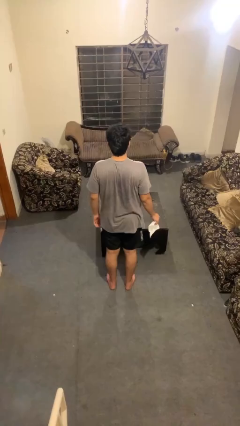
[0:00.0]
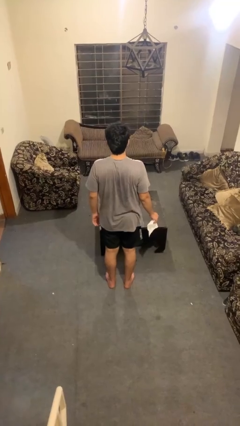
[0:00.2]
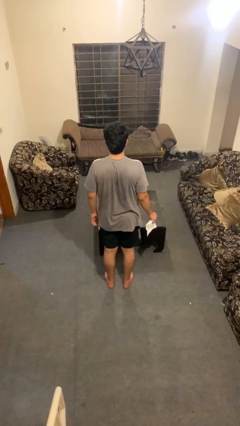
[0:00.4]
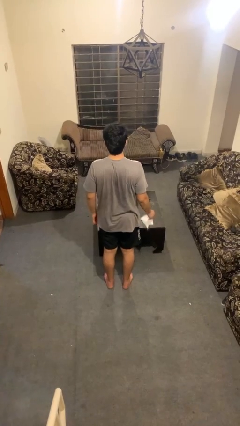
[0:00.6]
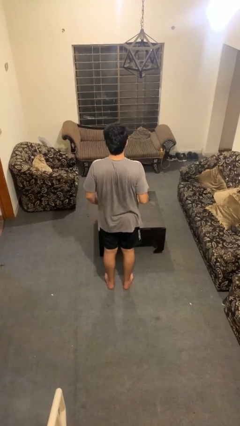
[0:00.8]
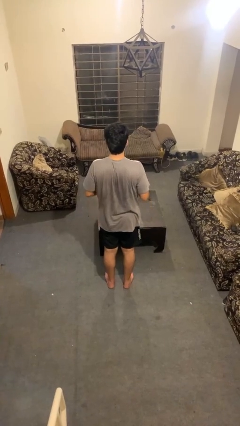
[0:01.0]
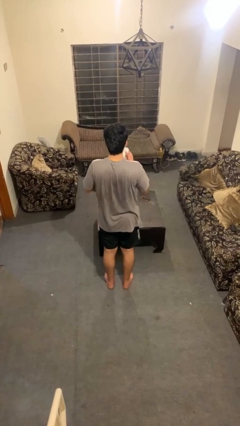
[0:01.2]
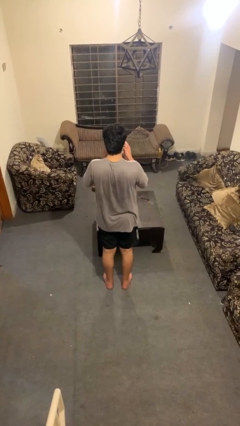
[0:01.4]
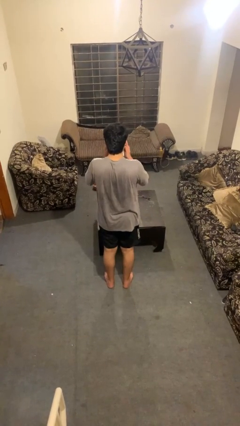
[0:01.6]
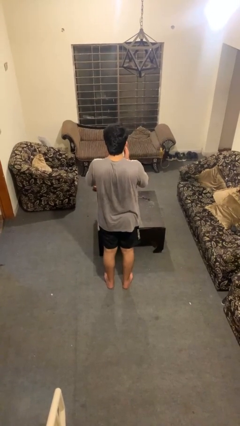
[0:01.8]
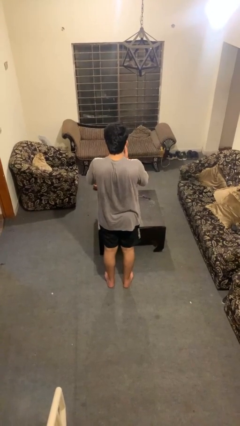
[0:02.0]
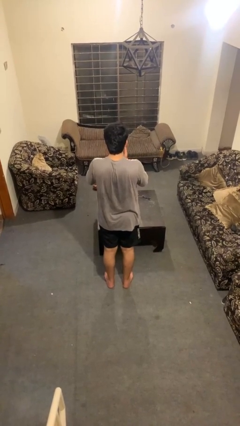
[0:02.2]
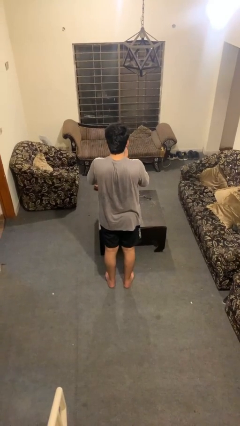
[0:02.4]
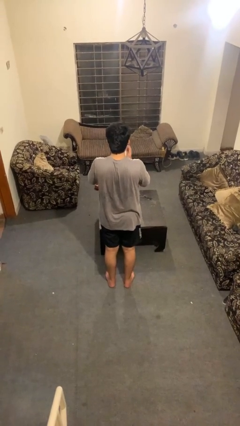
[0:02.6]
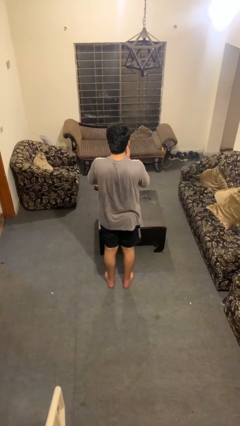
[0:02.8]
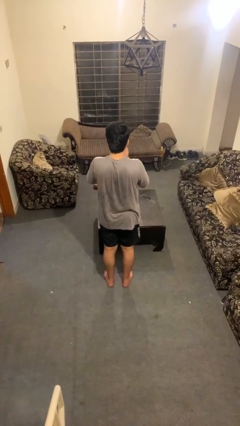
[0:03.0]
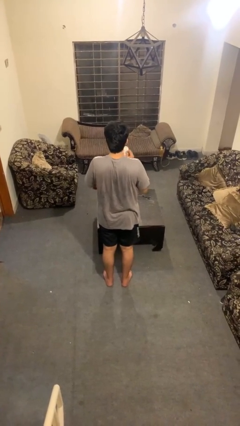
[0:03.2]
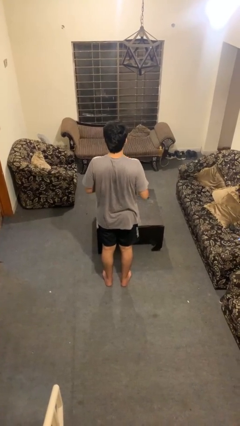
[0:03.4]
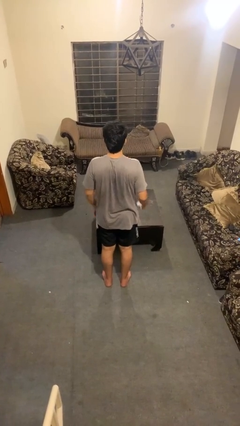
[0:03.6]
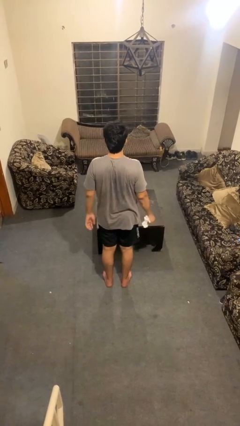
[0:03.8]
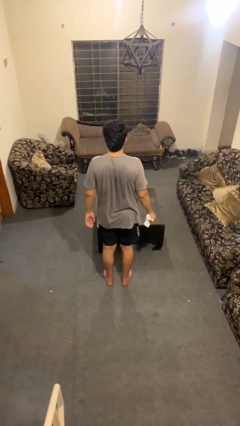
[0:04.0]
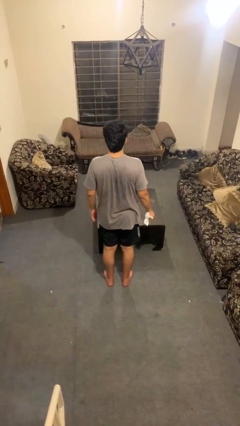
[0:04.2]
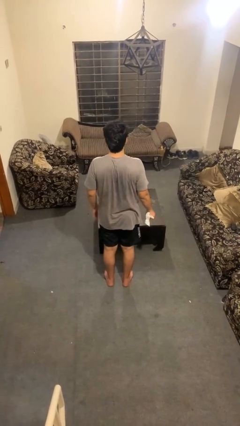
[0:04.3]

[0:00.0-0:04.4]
person blows nose

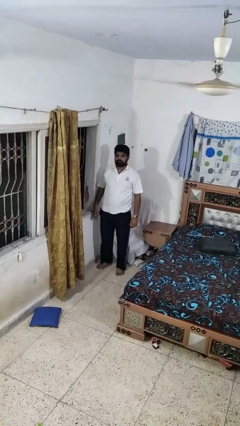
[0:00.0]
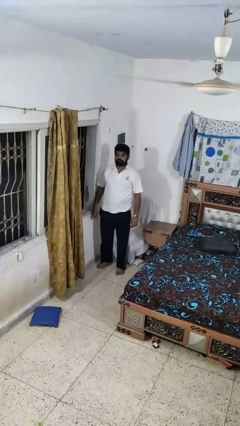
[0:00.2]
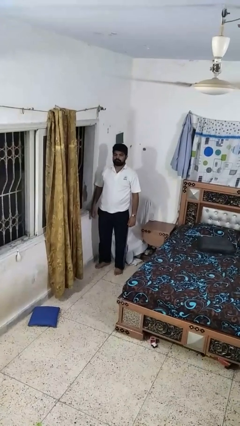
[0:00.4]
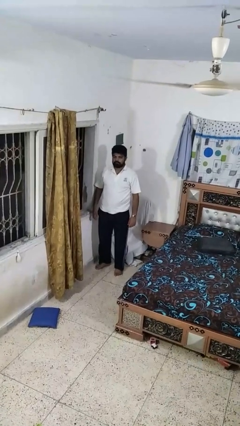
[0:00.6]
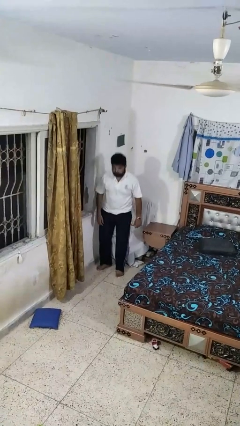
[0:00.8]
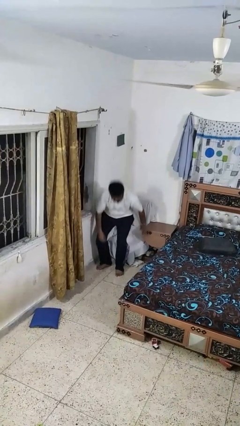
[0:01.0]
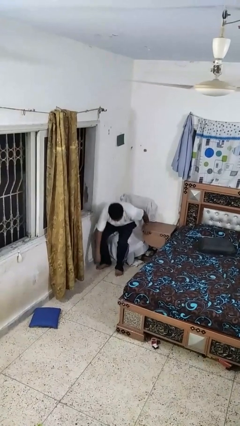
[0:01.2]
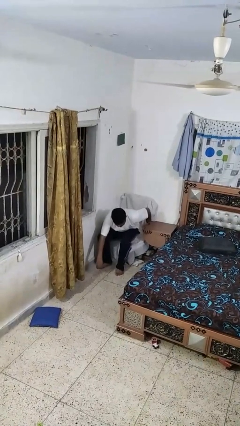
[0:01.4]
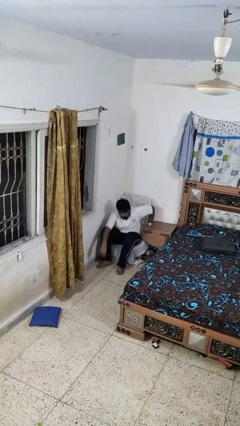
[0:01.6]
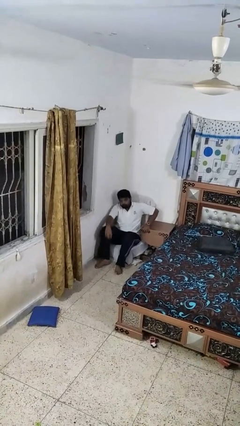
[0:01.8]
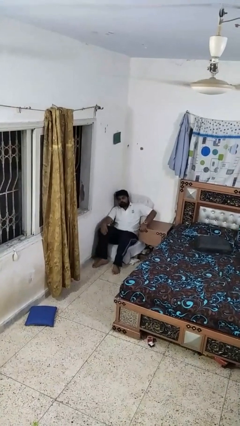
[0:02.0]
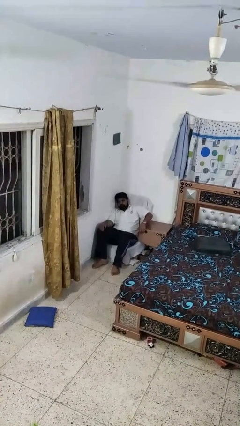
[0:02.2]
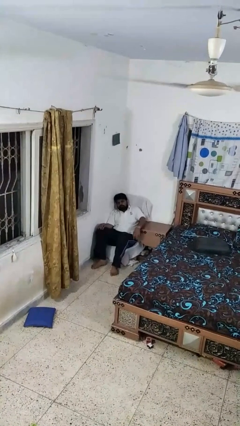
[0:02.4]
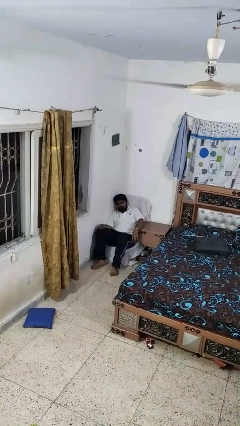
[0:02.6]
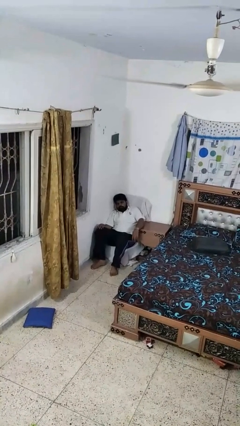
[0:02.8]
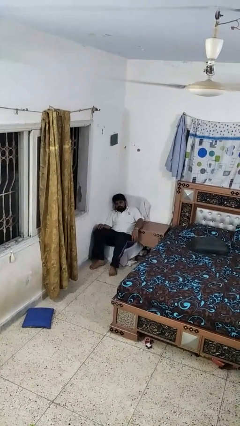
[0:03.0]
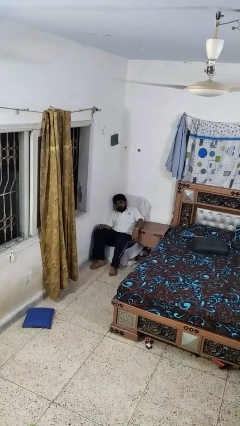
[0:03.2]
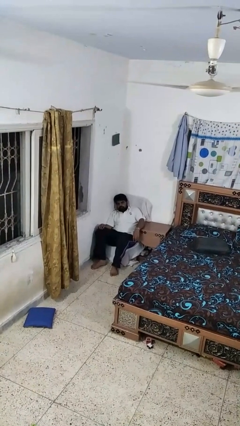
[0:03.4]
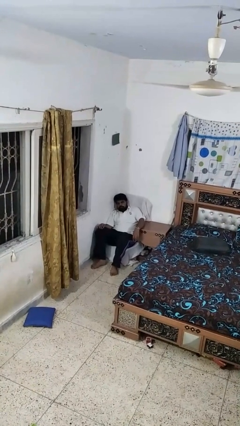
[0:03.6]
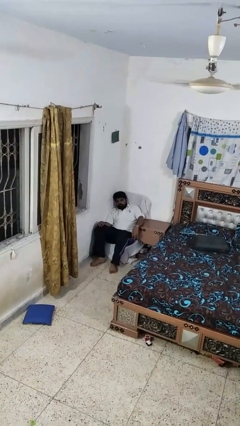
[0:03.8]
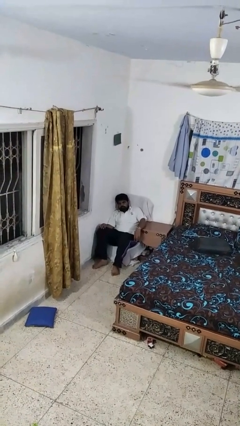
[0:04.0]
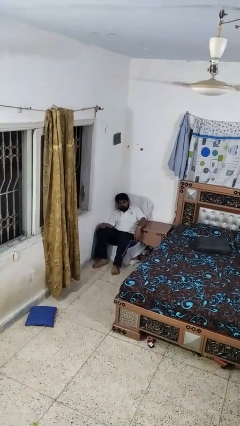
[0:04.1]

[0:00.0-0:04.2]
person lies down on couch

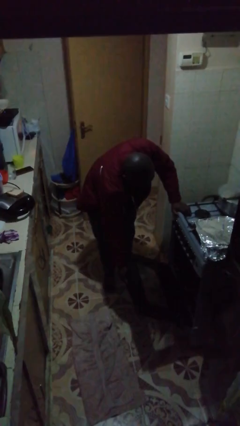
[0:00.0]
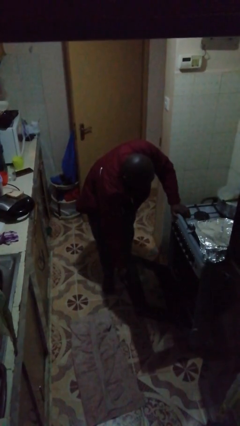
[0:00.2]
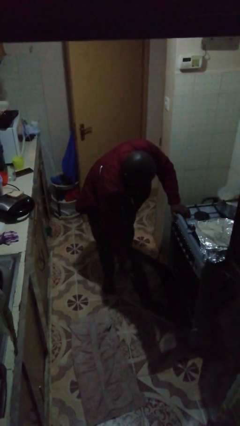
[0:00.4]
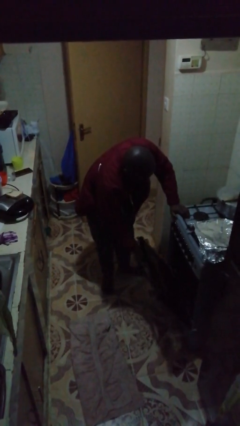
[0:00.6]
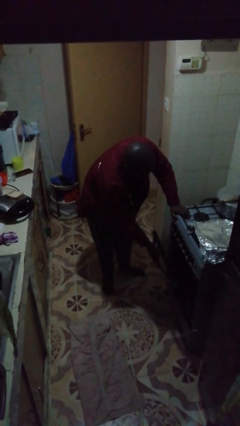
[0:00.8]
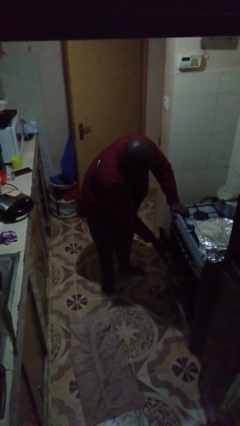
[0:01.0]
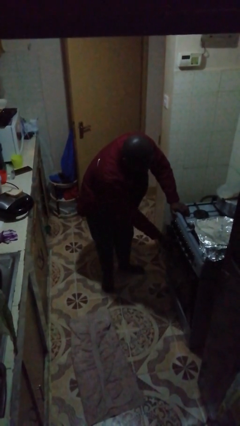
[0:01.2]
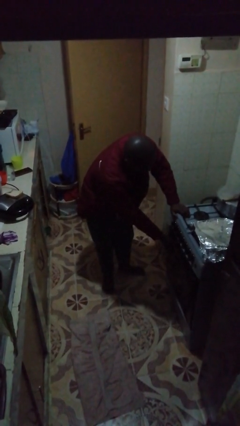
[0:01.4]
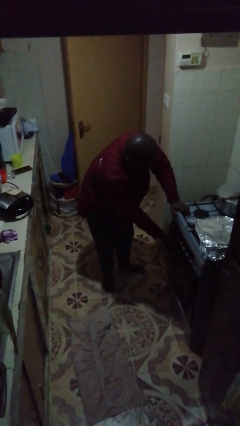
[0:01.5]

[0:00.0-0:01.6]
person closes oven door

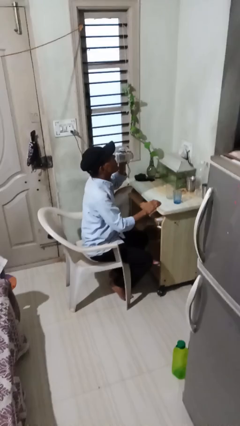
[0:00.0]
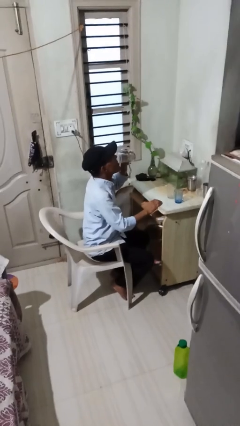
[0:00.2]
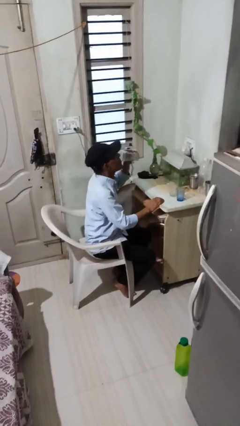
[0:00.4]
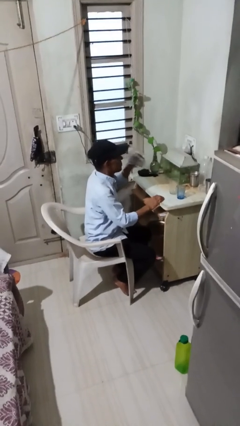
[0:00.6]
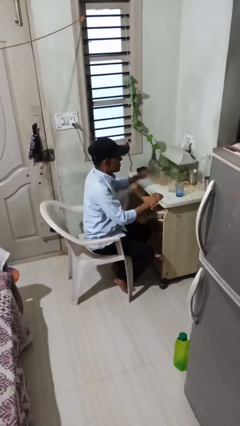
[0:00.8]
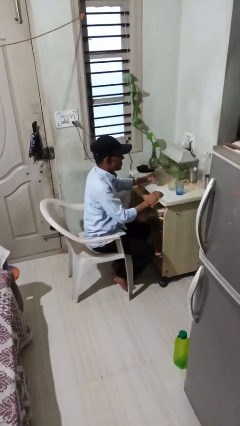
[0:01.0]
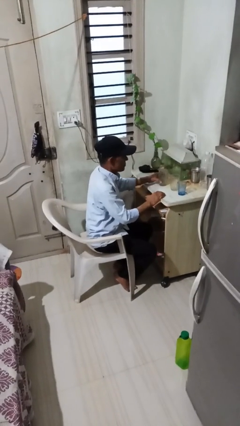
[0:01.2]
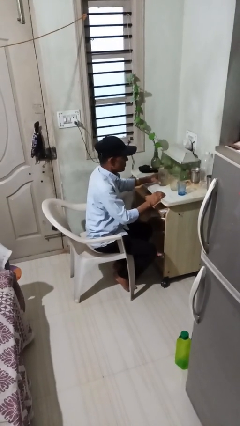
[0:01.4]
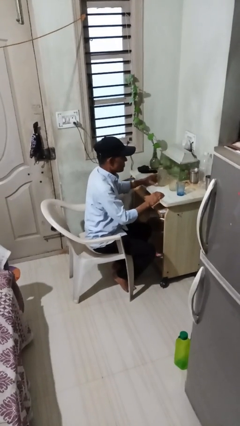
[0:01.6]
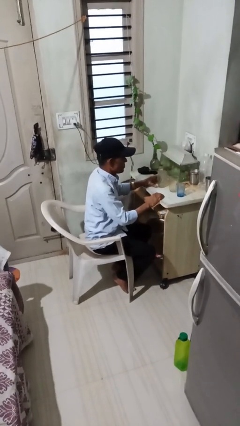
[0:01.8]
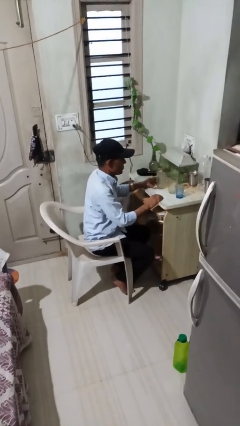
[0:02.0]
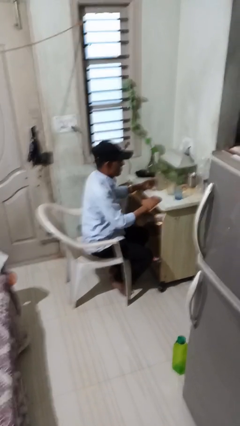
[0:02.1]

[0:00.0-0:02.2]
person puts down object on table

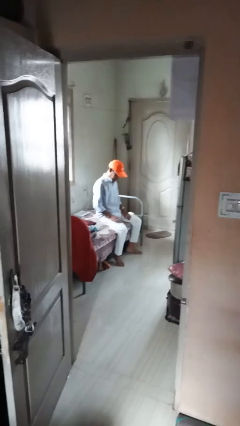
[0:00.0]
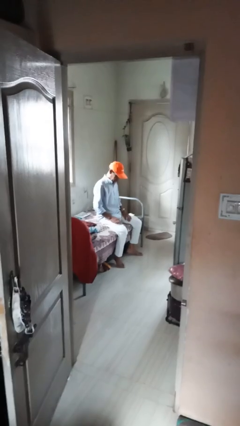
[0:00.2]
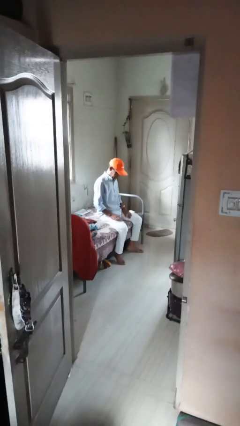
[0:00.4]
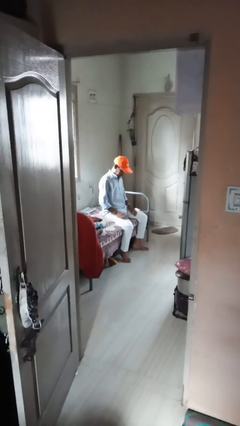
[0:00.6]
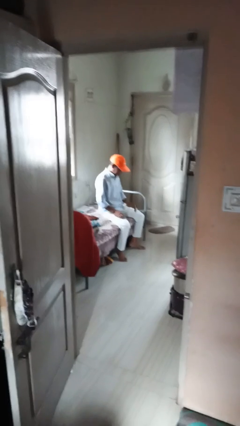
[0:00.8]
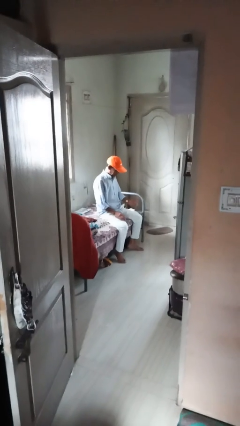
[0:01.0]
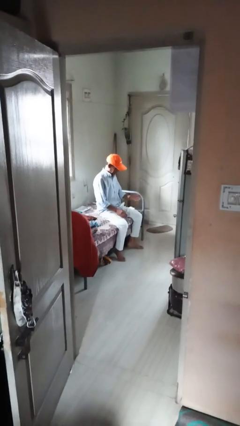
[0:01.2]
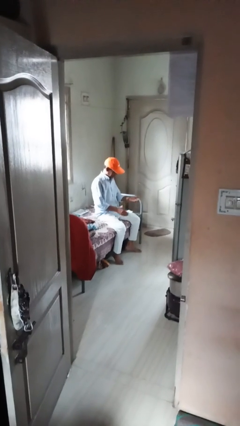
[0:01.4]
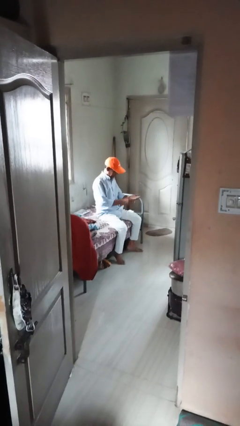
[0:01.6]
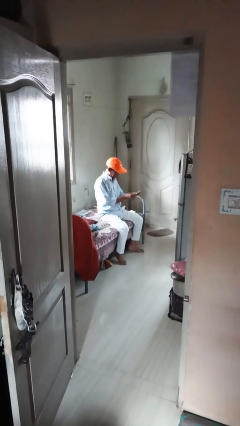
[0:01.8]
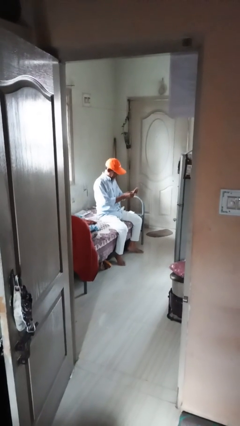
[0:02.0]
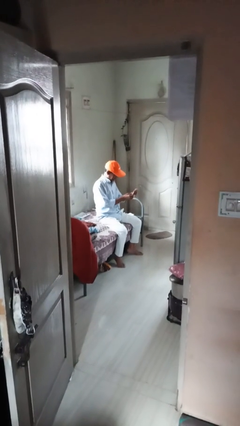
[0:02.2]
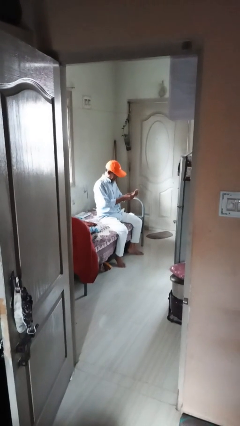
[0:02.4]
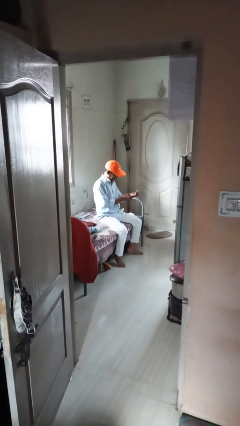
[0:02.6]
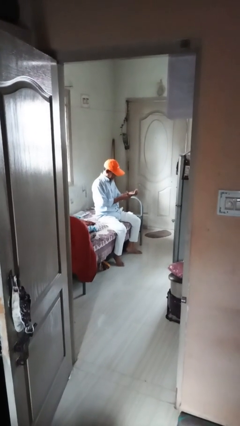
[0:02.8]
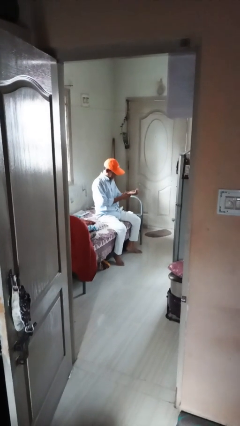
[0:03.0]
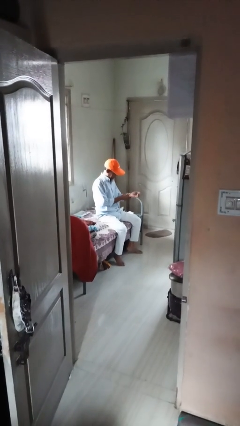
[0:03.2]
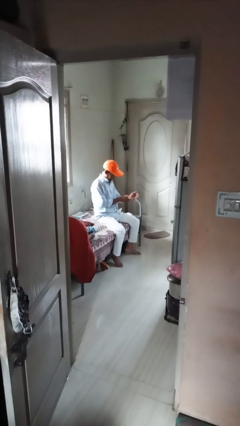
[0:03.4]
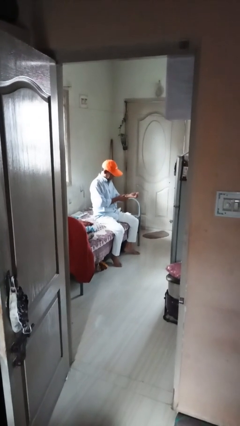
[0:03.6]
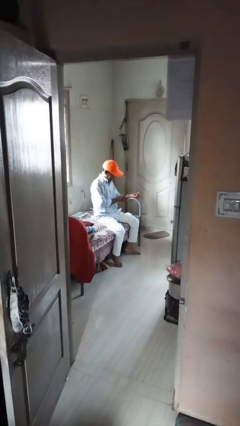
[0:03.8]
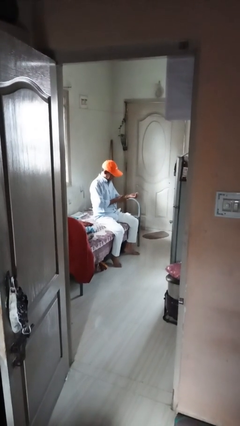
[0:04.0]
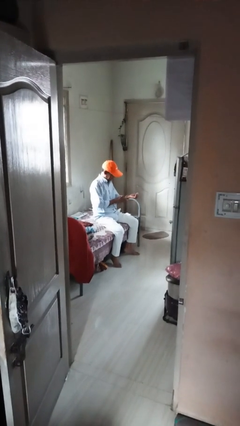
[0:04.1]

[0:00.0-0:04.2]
person looks at hands in lap

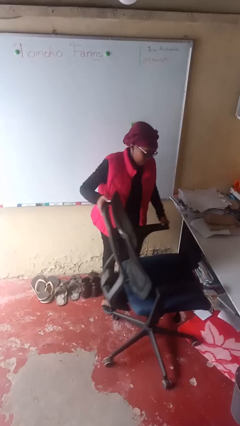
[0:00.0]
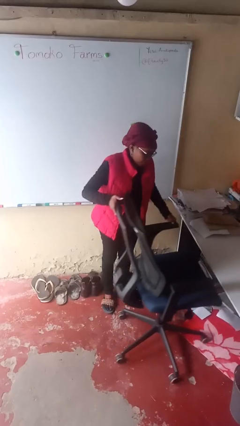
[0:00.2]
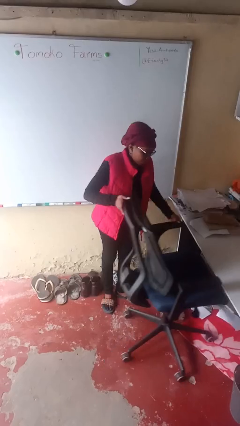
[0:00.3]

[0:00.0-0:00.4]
person pulls out chair

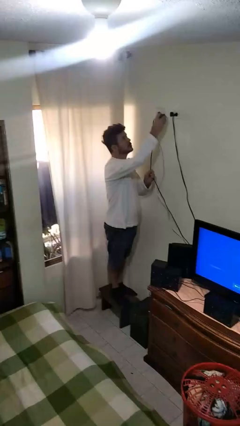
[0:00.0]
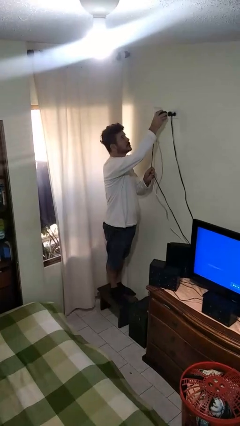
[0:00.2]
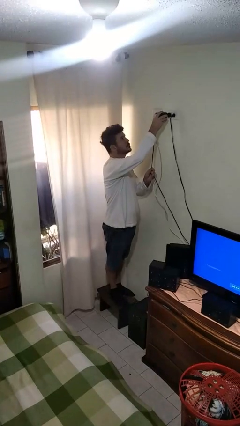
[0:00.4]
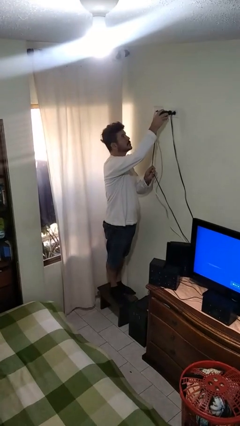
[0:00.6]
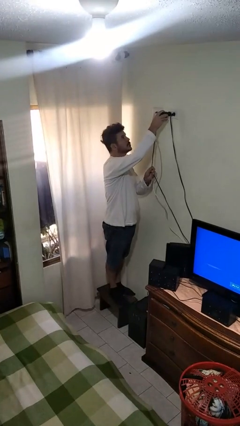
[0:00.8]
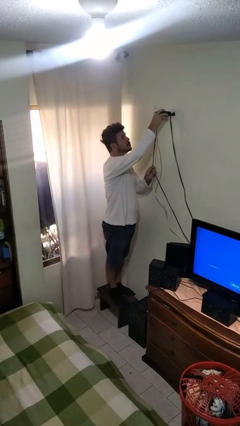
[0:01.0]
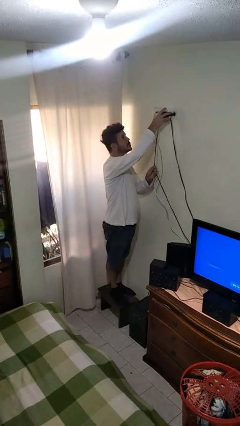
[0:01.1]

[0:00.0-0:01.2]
person plugs into electrical socket
